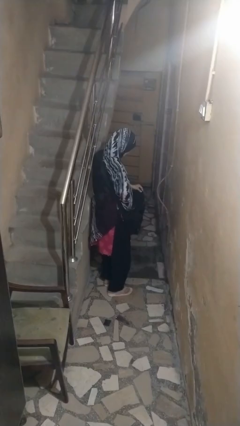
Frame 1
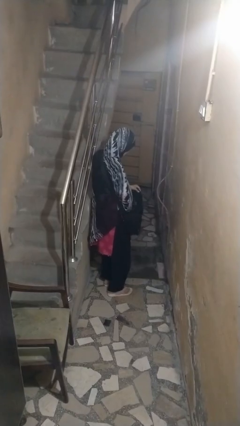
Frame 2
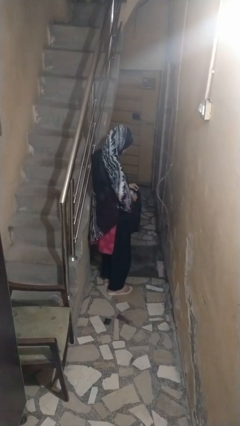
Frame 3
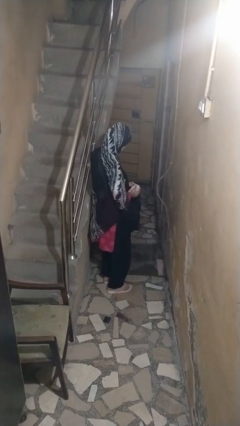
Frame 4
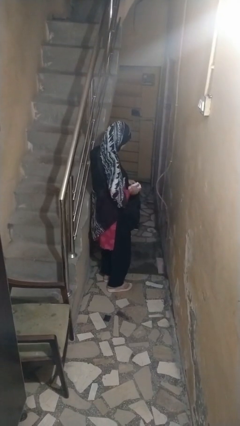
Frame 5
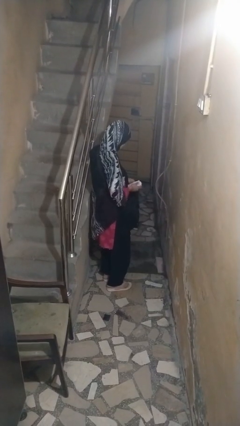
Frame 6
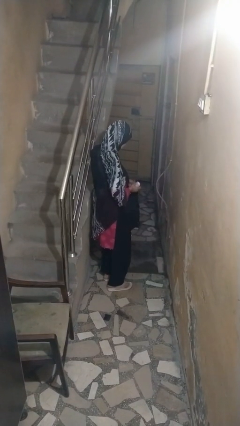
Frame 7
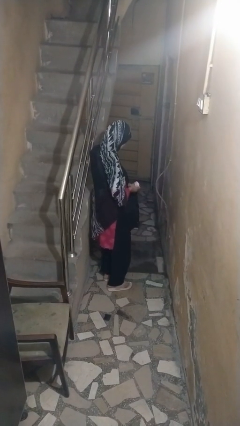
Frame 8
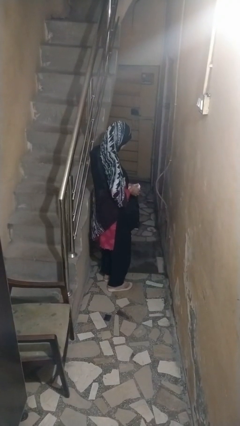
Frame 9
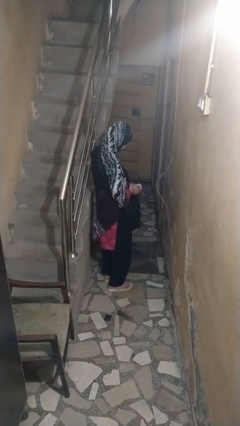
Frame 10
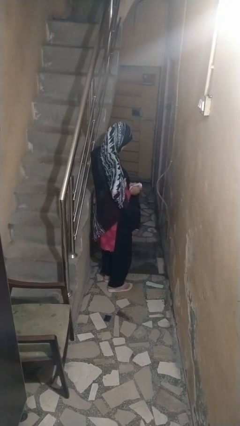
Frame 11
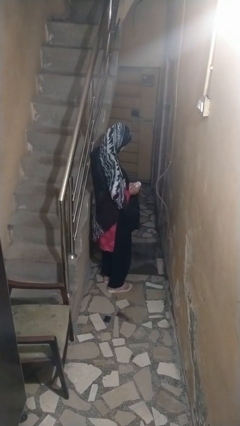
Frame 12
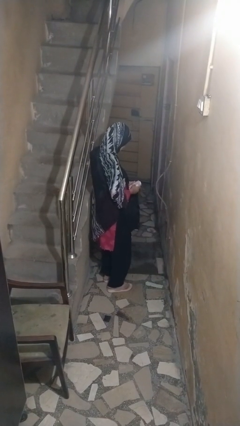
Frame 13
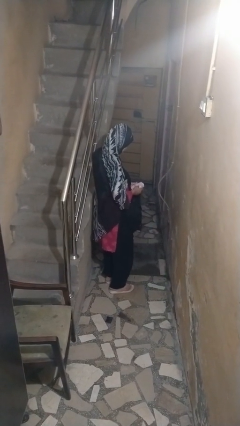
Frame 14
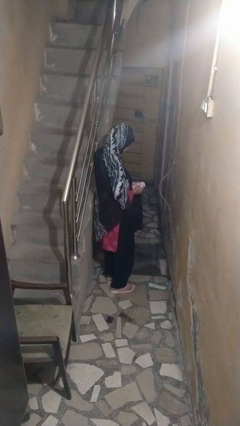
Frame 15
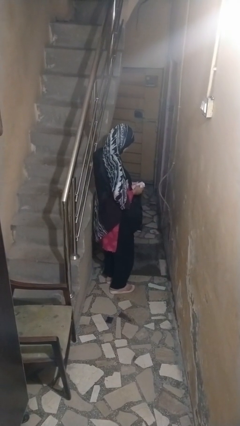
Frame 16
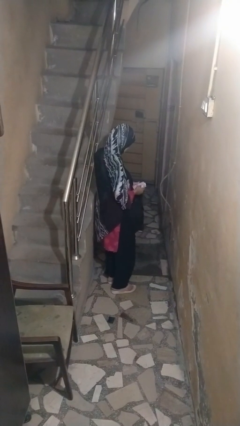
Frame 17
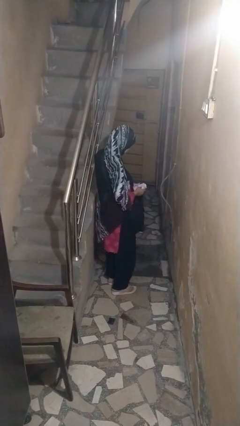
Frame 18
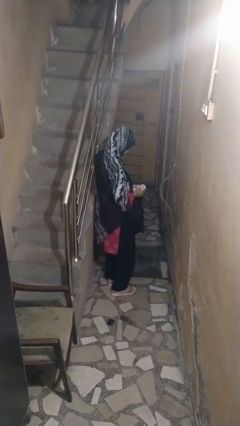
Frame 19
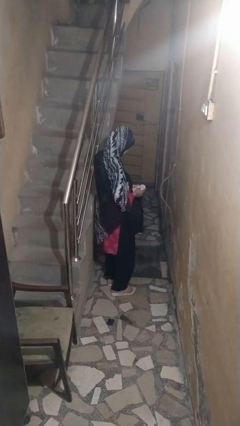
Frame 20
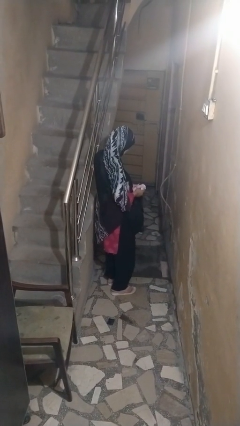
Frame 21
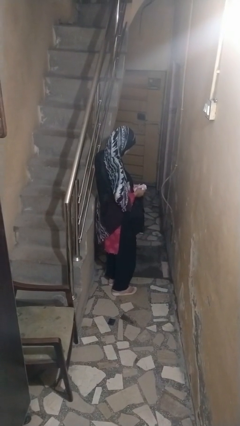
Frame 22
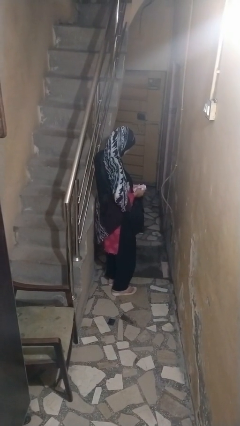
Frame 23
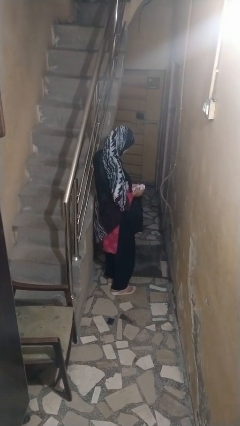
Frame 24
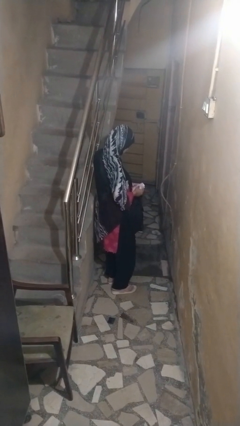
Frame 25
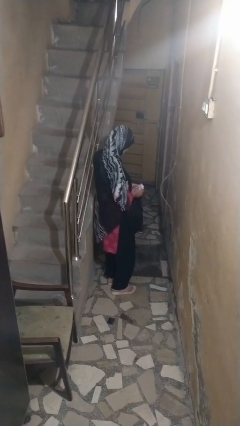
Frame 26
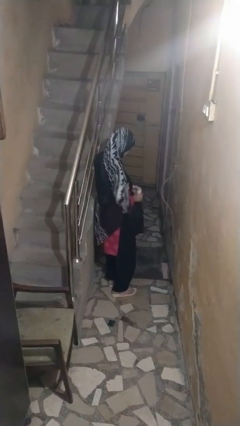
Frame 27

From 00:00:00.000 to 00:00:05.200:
person takes object from backpack

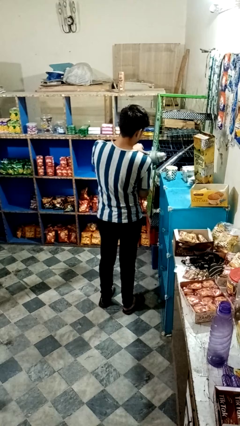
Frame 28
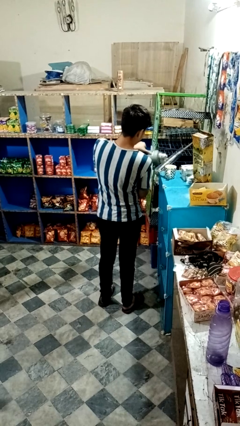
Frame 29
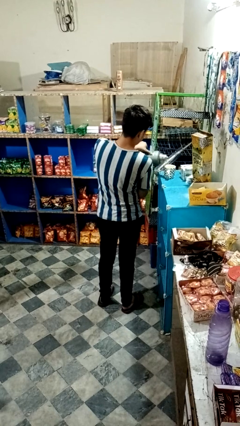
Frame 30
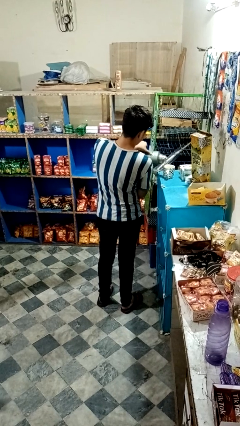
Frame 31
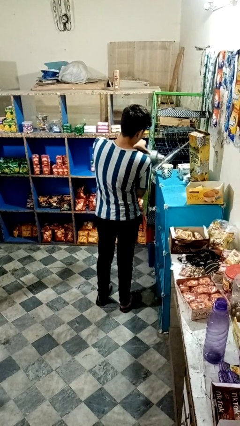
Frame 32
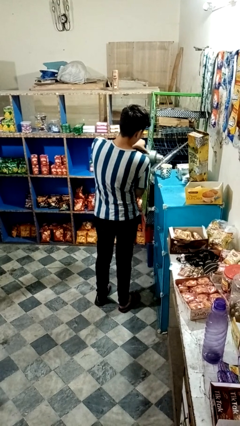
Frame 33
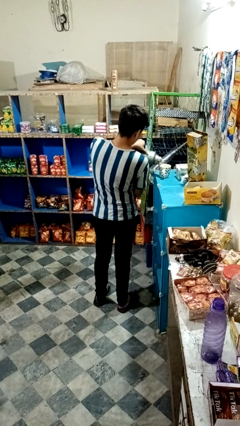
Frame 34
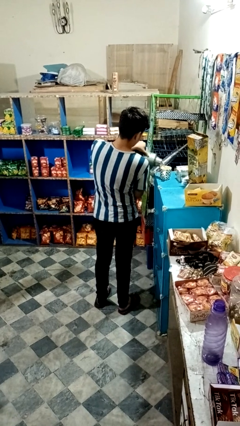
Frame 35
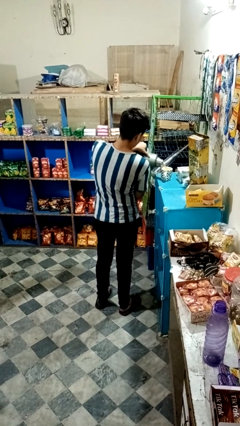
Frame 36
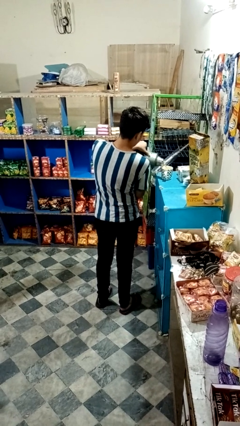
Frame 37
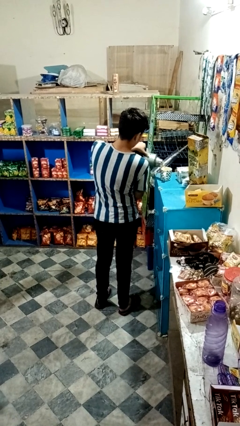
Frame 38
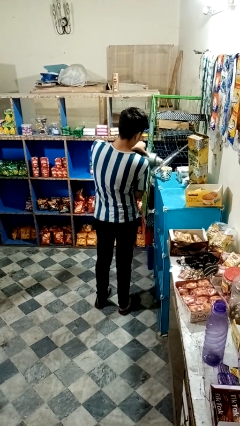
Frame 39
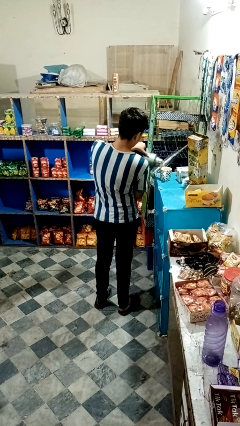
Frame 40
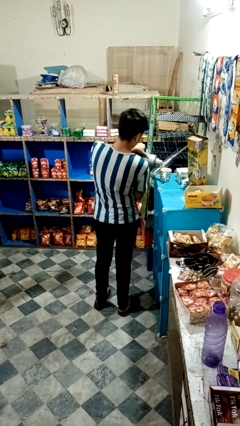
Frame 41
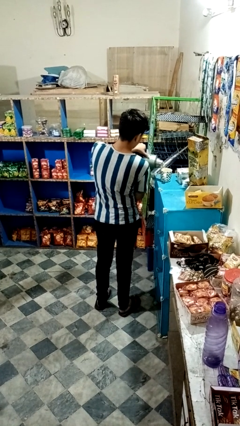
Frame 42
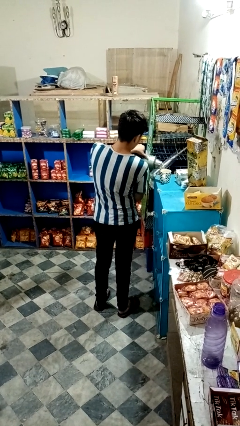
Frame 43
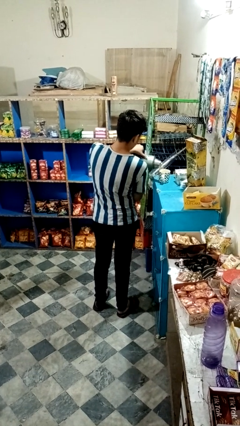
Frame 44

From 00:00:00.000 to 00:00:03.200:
person pours coffee into mug

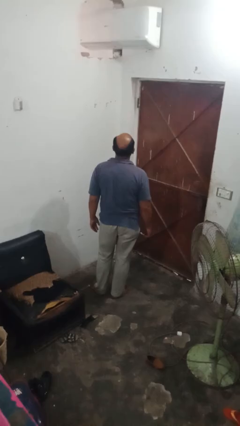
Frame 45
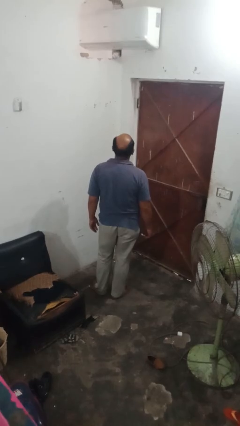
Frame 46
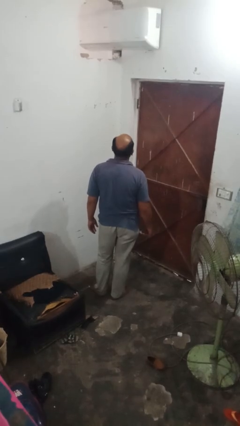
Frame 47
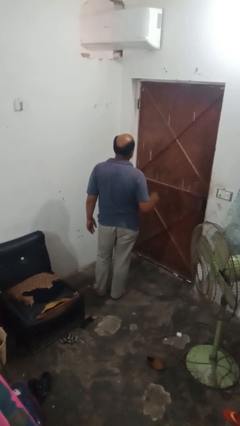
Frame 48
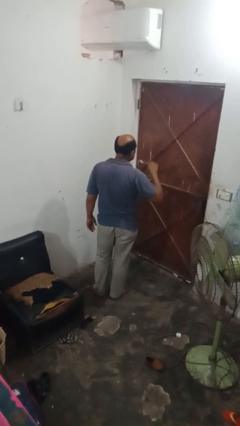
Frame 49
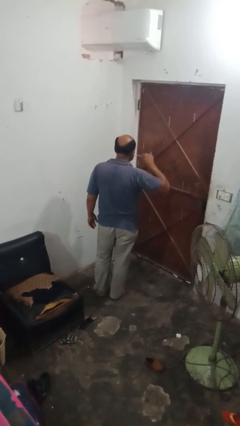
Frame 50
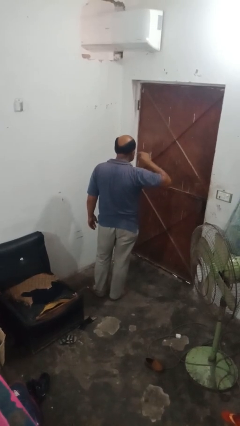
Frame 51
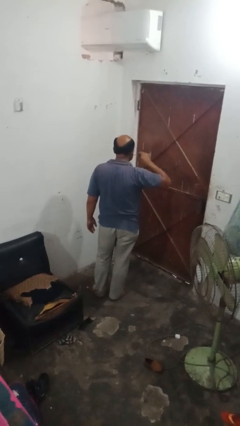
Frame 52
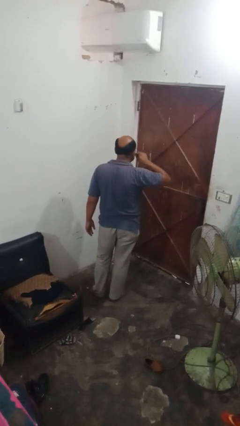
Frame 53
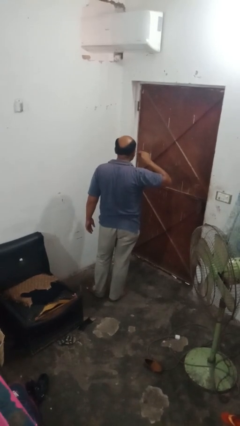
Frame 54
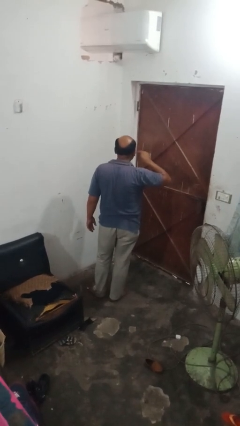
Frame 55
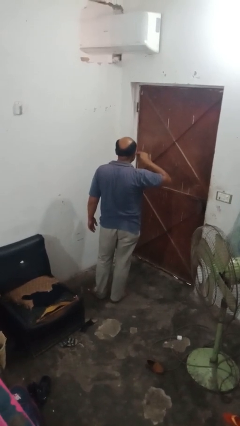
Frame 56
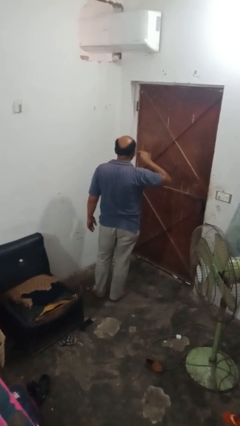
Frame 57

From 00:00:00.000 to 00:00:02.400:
person brushes teeth

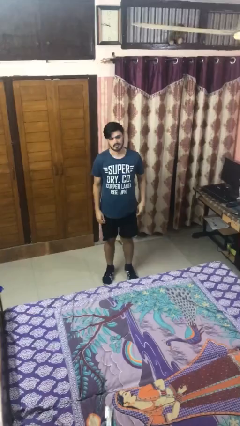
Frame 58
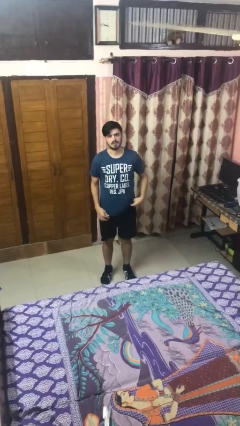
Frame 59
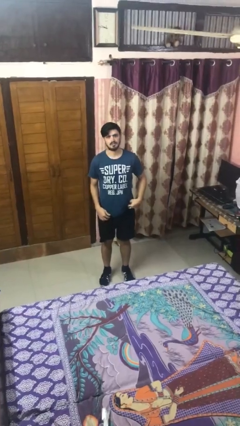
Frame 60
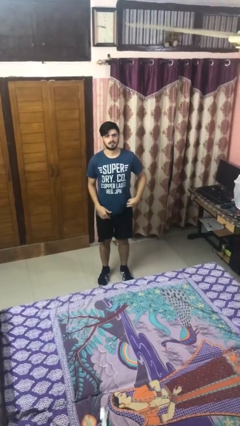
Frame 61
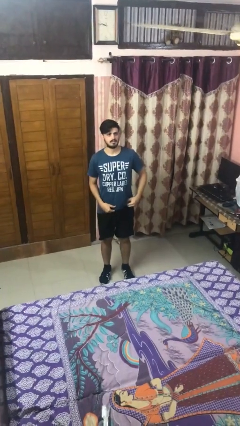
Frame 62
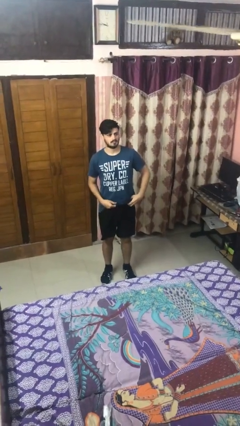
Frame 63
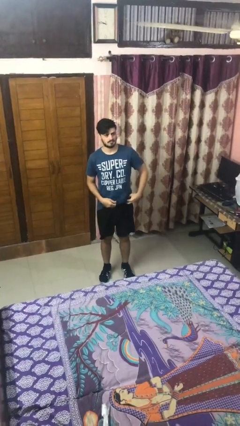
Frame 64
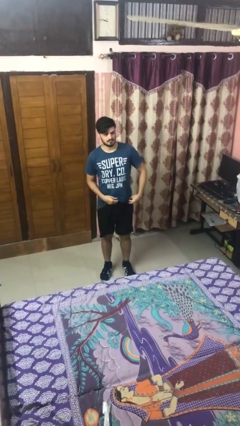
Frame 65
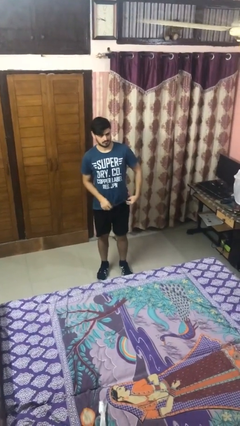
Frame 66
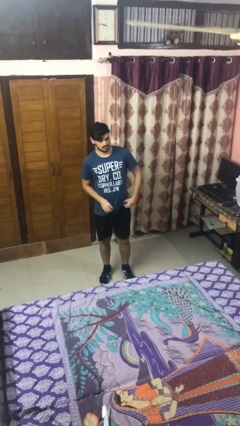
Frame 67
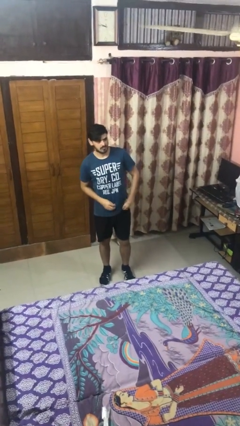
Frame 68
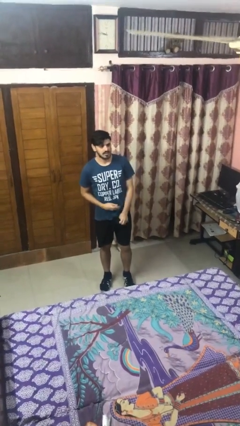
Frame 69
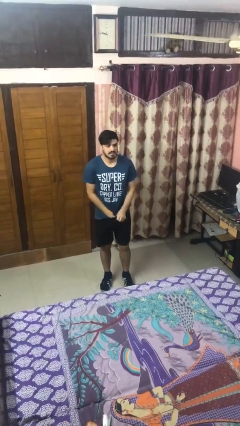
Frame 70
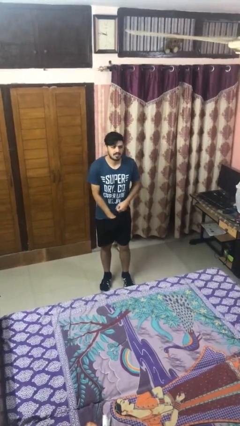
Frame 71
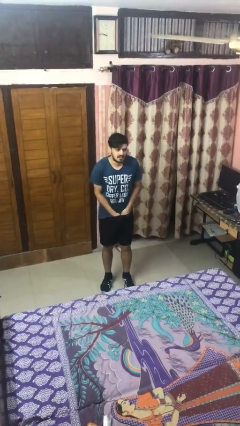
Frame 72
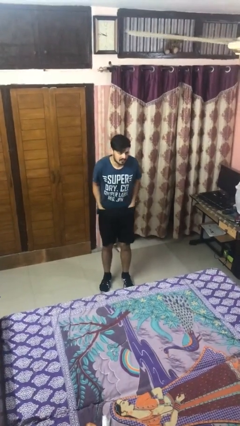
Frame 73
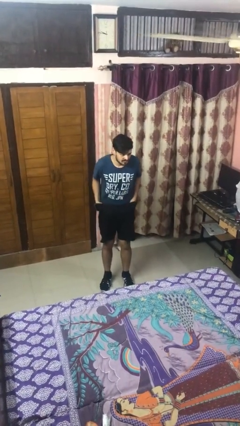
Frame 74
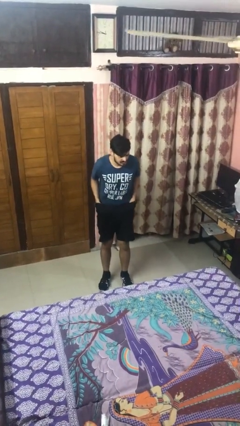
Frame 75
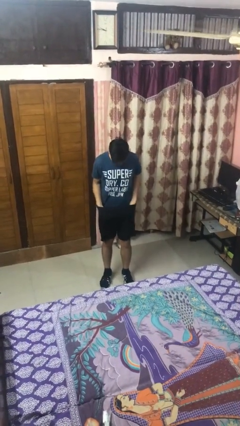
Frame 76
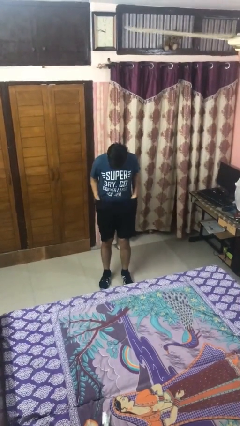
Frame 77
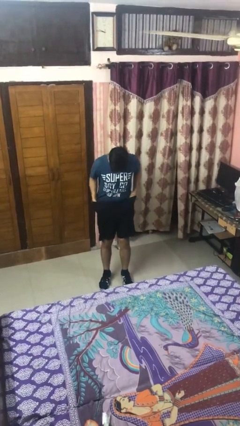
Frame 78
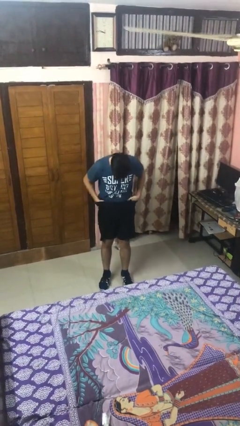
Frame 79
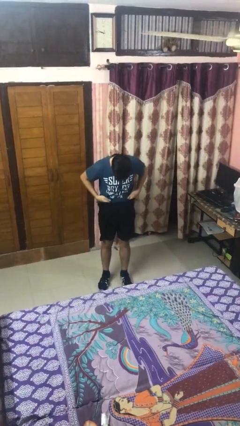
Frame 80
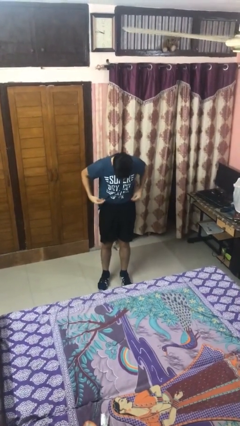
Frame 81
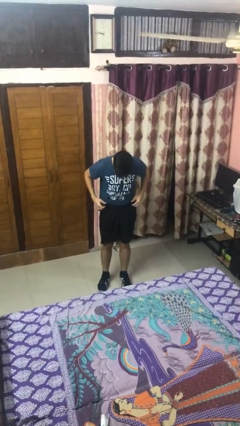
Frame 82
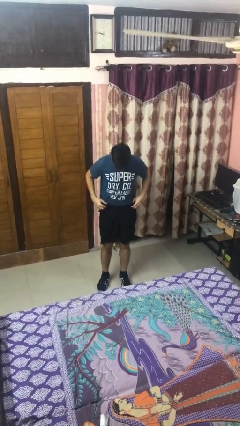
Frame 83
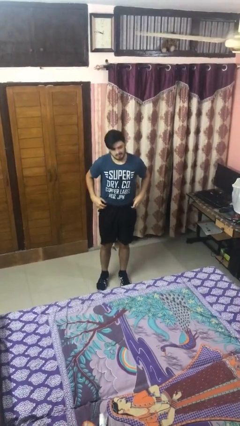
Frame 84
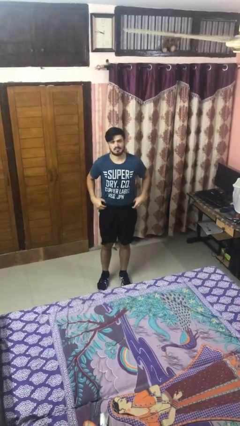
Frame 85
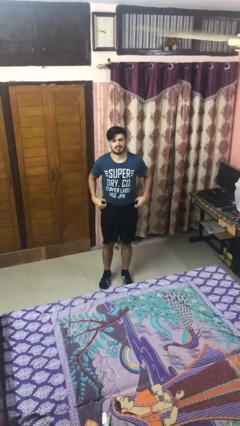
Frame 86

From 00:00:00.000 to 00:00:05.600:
person tucks in shirt

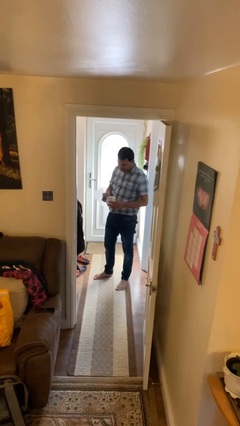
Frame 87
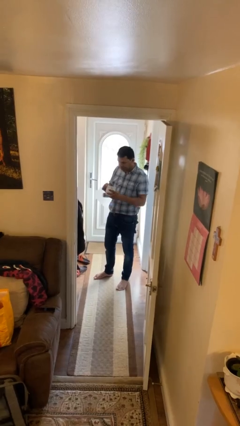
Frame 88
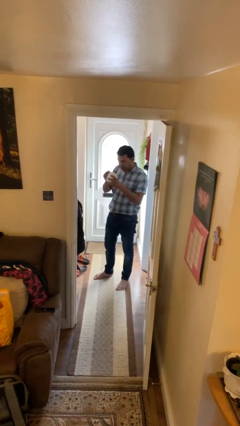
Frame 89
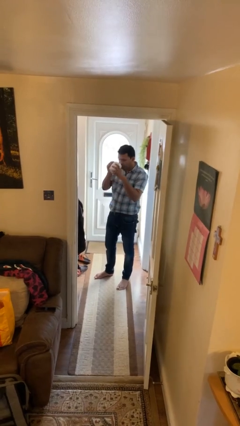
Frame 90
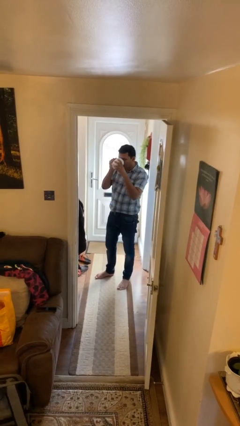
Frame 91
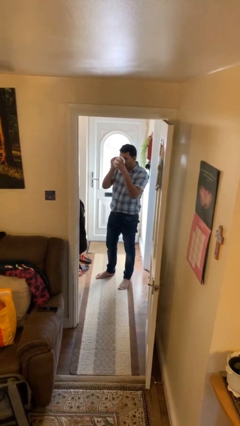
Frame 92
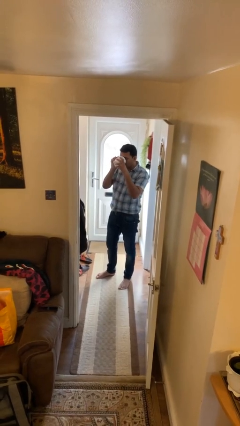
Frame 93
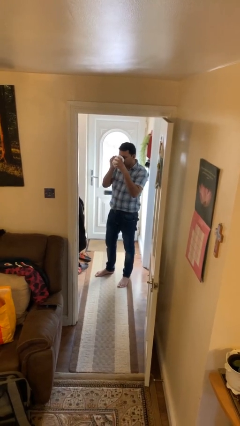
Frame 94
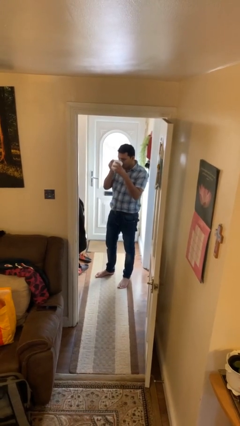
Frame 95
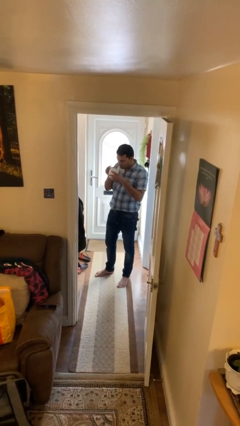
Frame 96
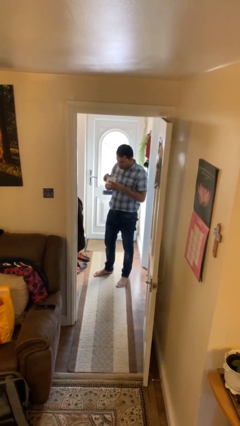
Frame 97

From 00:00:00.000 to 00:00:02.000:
person drinks from mug
